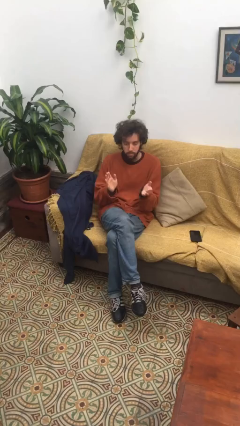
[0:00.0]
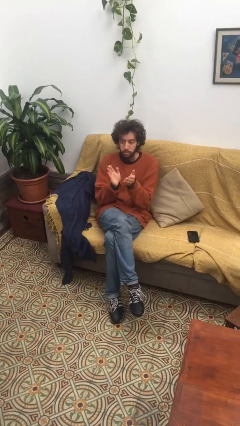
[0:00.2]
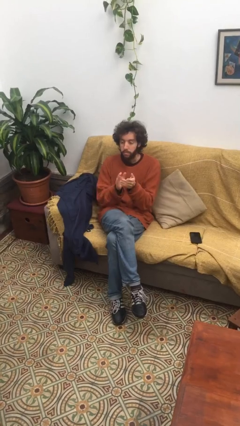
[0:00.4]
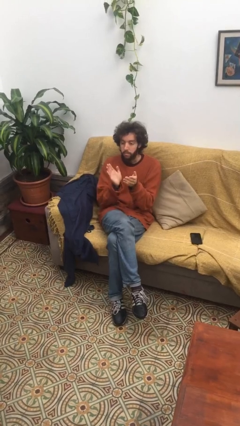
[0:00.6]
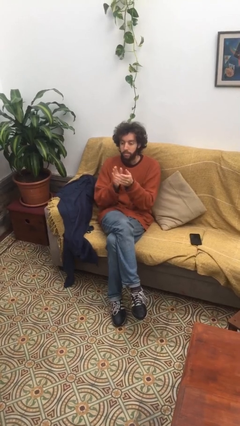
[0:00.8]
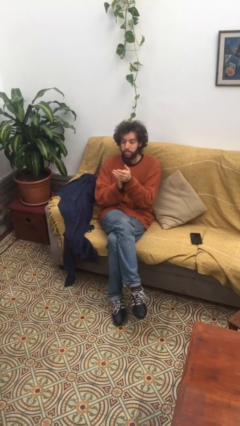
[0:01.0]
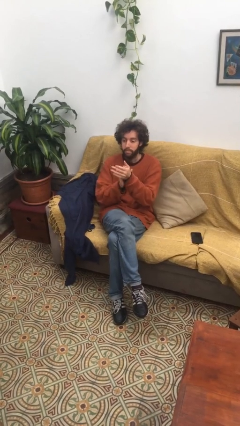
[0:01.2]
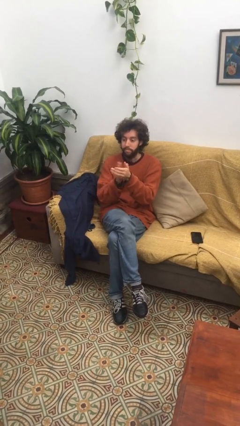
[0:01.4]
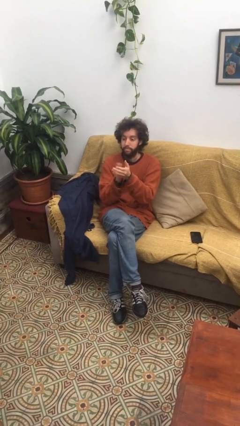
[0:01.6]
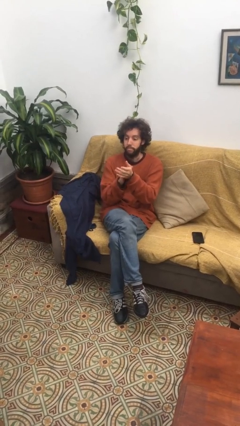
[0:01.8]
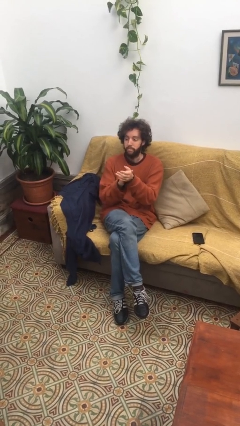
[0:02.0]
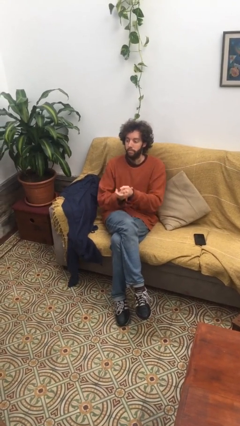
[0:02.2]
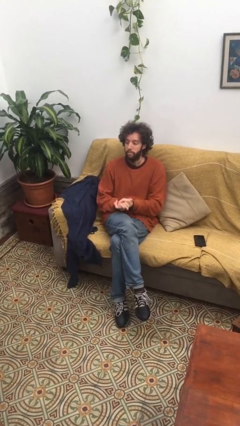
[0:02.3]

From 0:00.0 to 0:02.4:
person claps hands

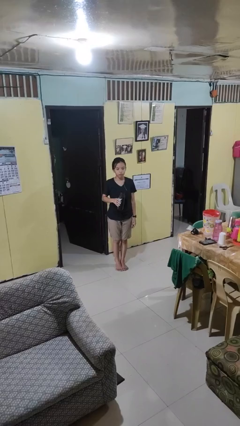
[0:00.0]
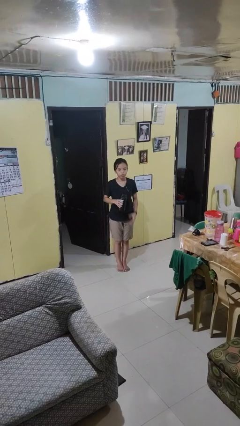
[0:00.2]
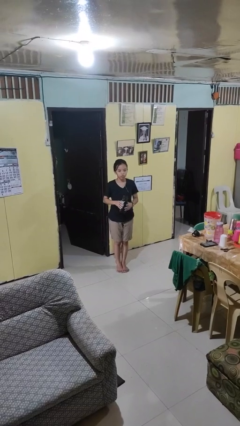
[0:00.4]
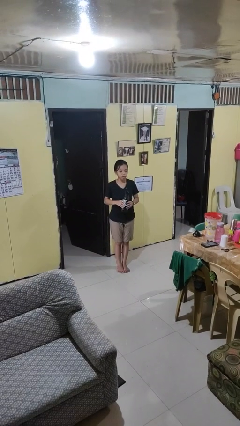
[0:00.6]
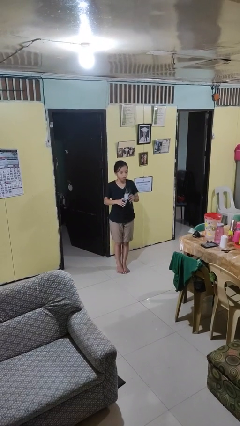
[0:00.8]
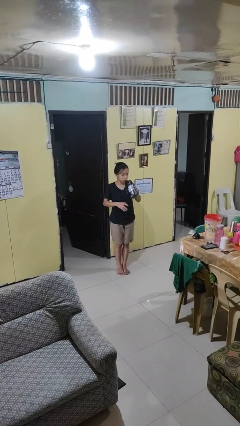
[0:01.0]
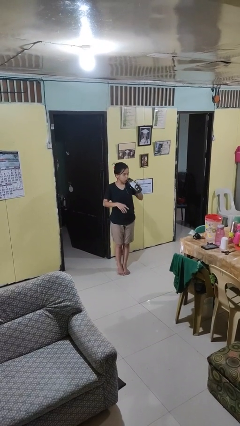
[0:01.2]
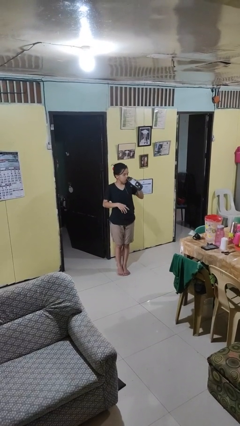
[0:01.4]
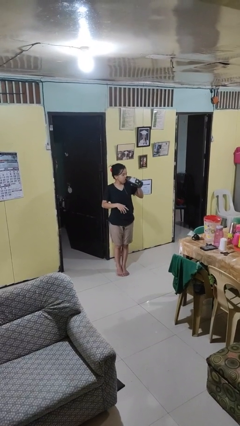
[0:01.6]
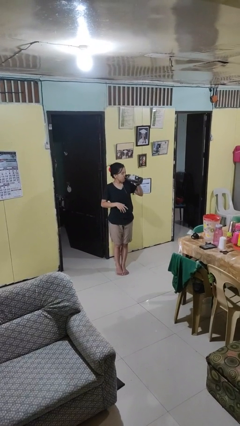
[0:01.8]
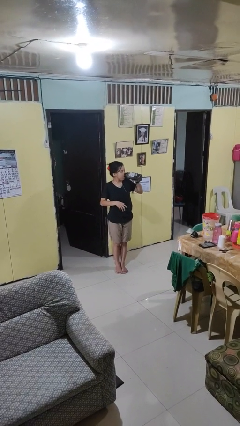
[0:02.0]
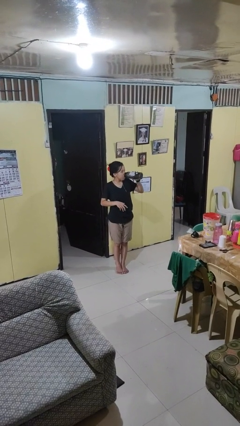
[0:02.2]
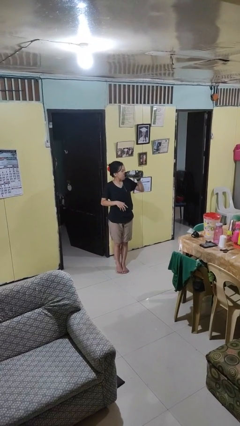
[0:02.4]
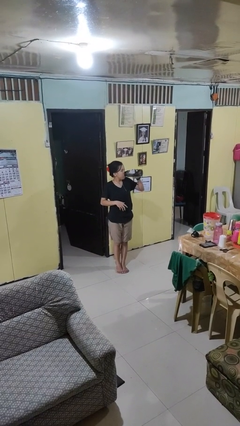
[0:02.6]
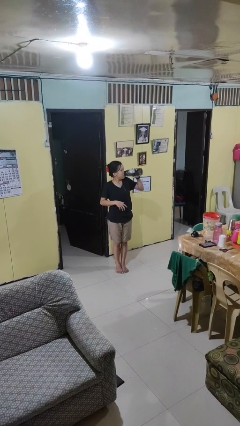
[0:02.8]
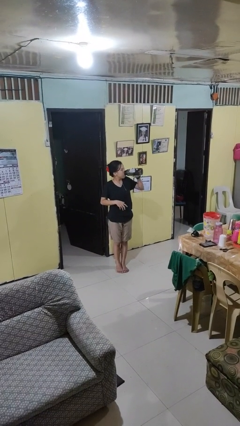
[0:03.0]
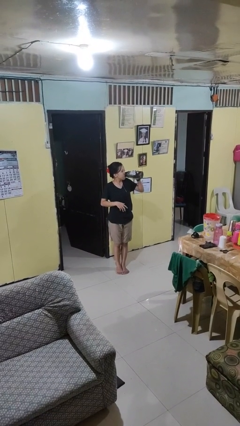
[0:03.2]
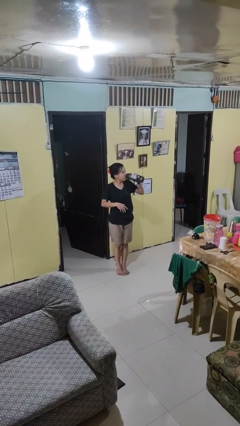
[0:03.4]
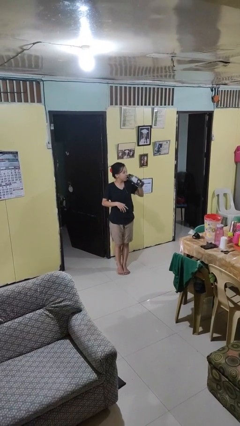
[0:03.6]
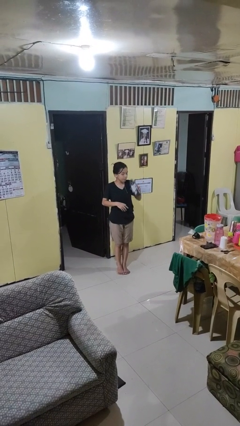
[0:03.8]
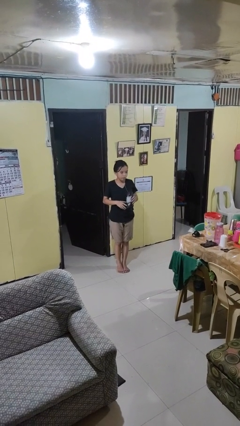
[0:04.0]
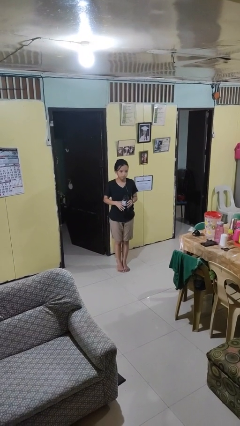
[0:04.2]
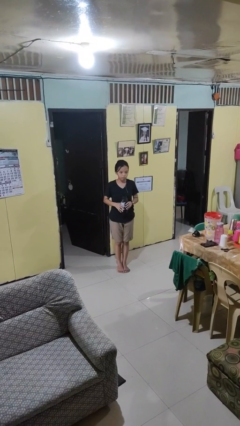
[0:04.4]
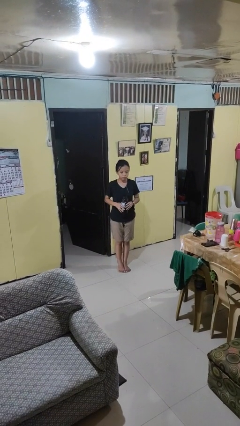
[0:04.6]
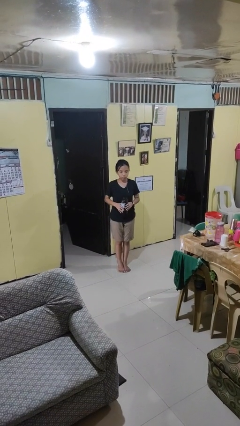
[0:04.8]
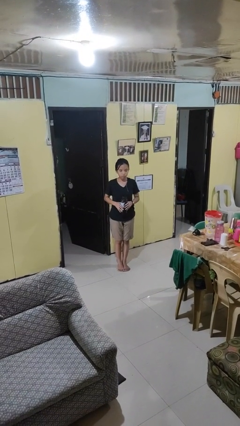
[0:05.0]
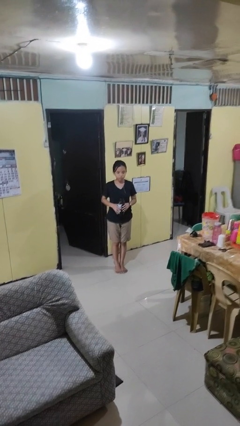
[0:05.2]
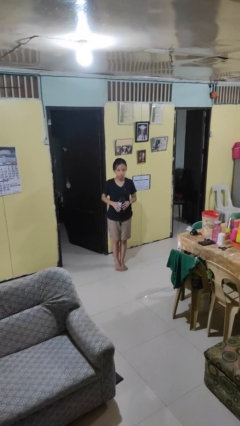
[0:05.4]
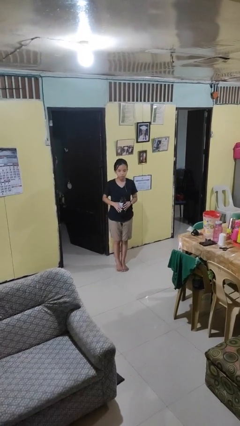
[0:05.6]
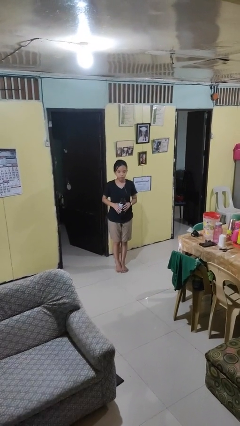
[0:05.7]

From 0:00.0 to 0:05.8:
person drinks from bottle

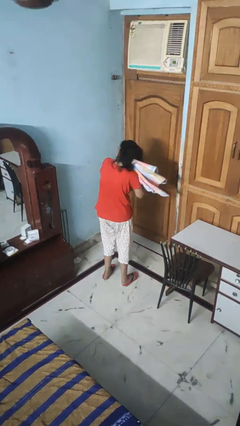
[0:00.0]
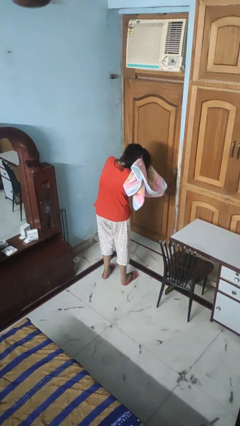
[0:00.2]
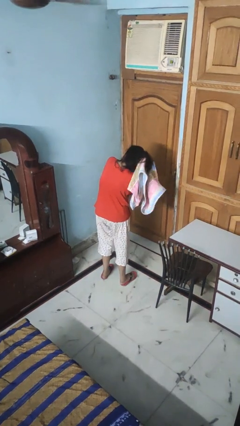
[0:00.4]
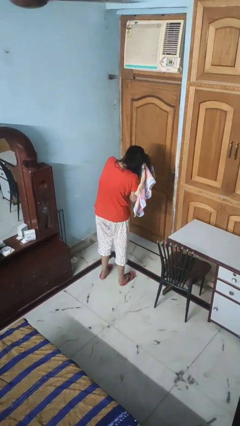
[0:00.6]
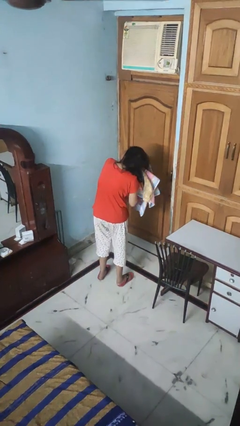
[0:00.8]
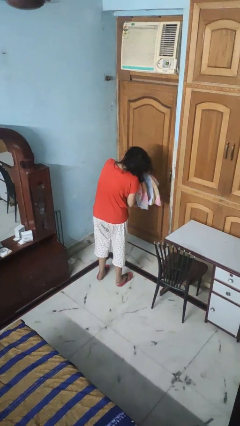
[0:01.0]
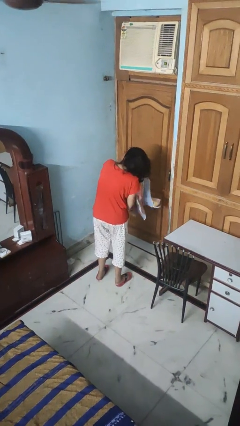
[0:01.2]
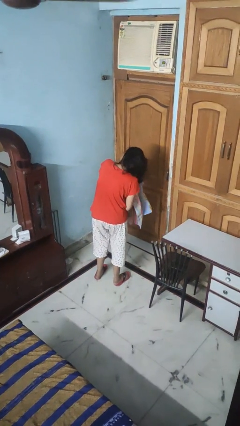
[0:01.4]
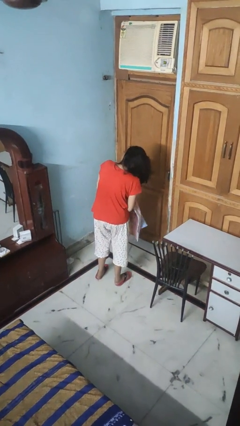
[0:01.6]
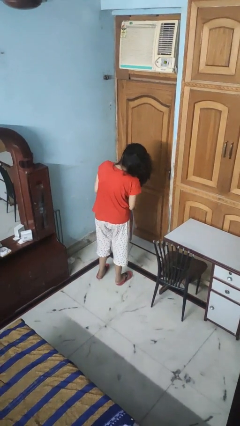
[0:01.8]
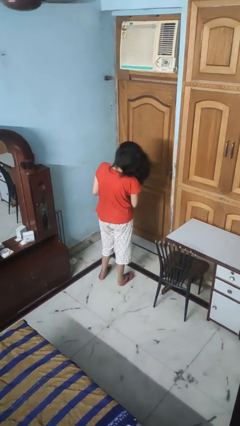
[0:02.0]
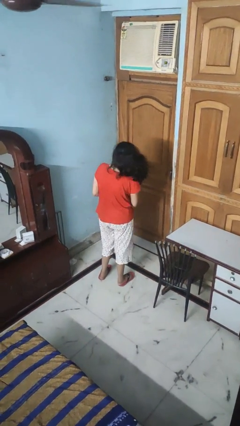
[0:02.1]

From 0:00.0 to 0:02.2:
person dries hair with towel

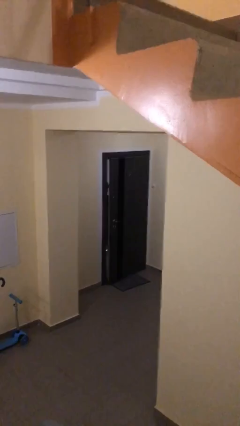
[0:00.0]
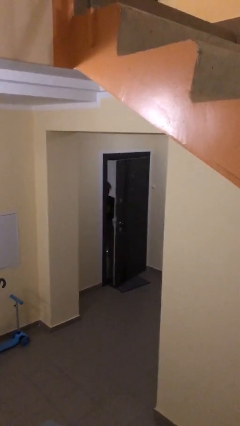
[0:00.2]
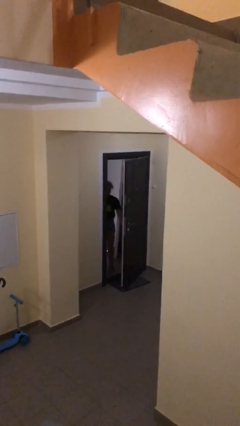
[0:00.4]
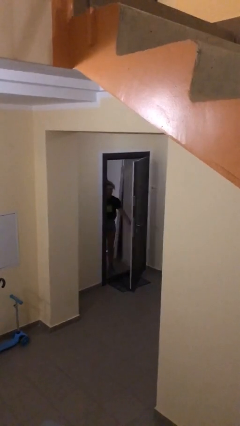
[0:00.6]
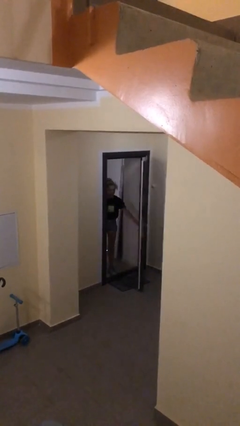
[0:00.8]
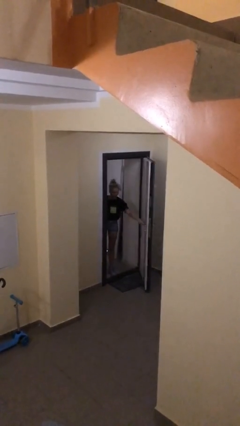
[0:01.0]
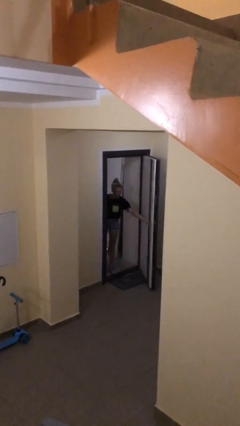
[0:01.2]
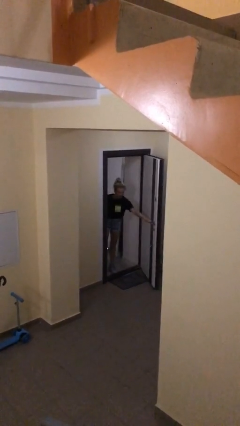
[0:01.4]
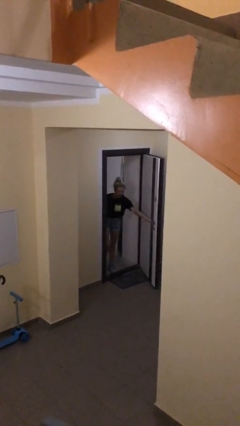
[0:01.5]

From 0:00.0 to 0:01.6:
person opens facility door

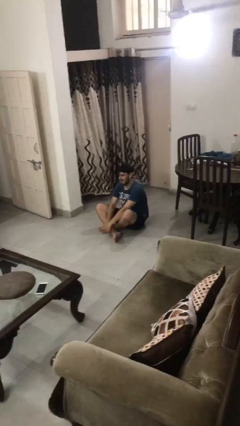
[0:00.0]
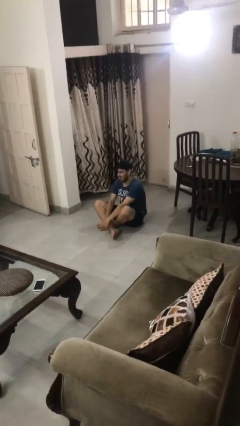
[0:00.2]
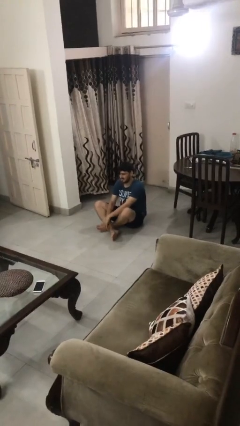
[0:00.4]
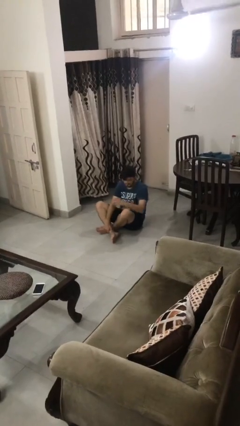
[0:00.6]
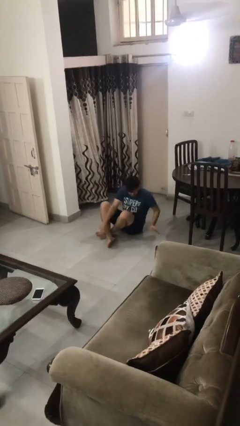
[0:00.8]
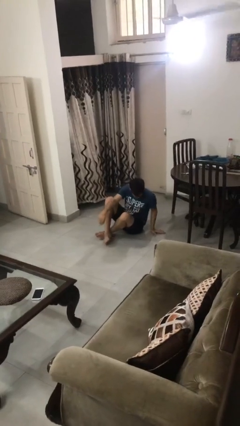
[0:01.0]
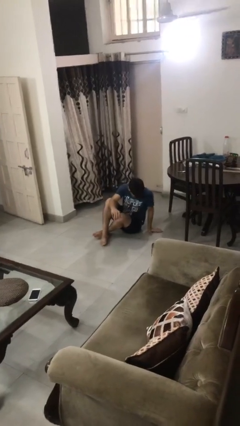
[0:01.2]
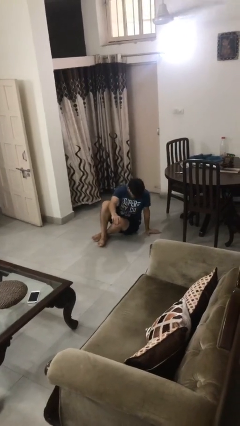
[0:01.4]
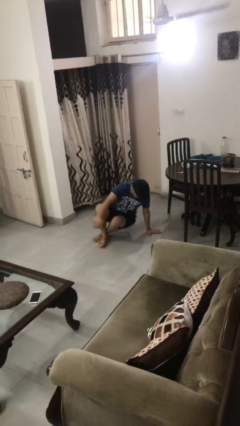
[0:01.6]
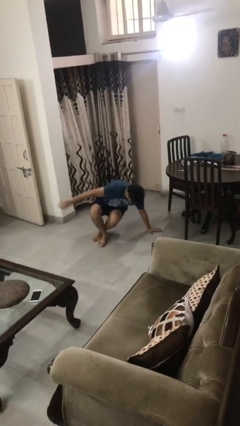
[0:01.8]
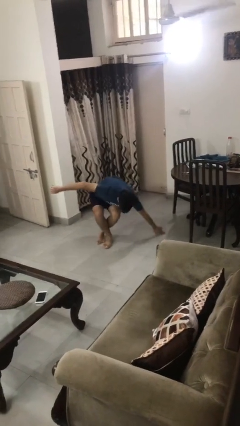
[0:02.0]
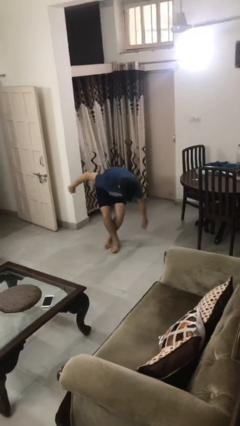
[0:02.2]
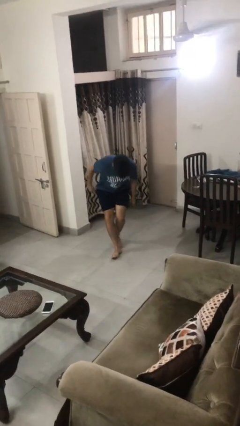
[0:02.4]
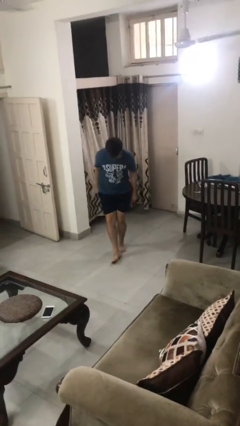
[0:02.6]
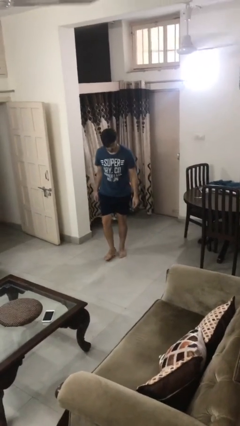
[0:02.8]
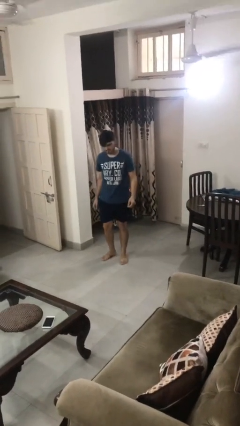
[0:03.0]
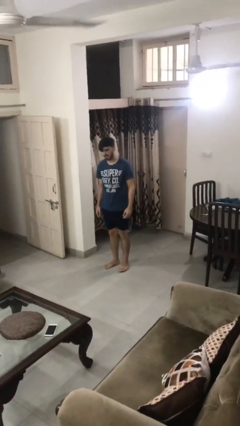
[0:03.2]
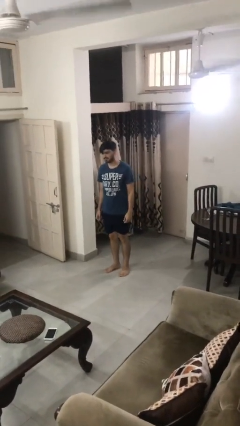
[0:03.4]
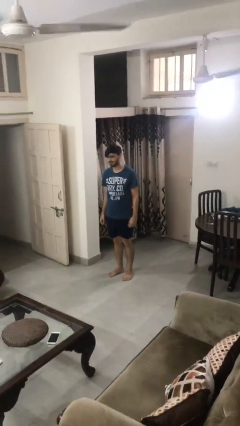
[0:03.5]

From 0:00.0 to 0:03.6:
person stands up from floor

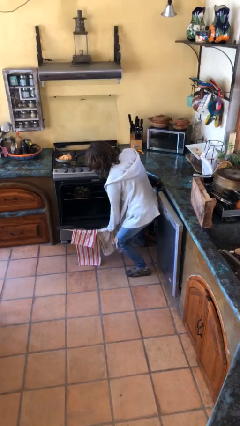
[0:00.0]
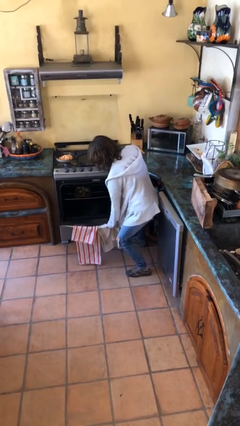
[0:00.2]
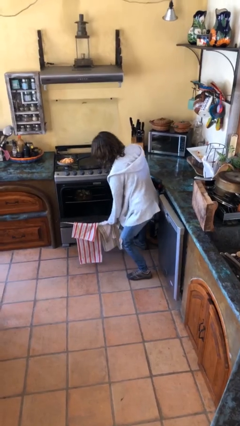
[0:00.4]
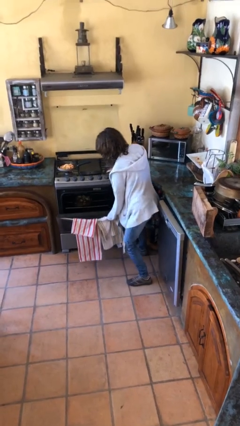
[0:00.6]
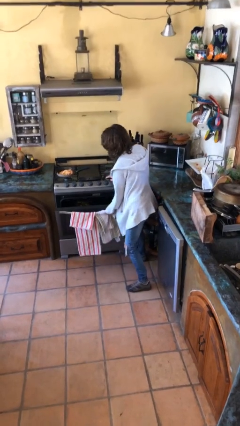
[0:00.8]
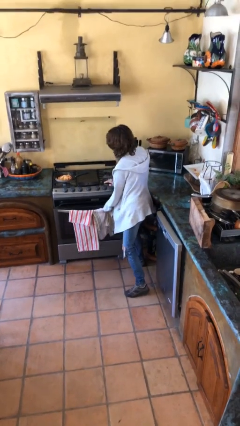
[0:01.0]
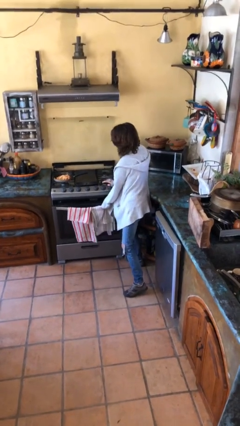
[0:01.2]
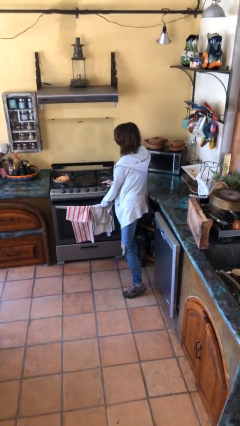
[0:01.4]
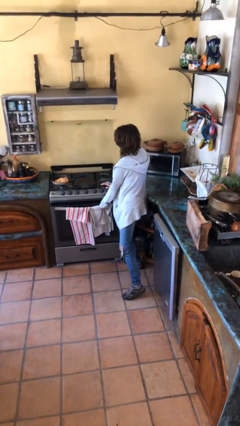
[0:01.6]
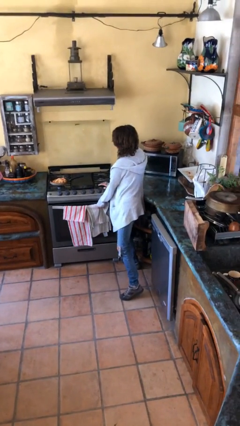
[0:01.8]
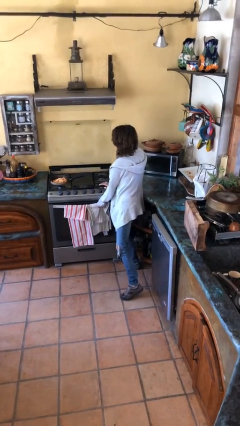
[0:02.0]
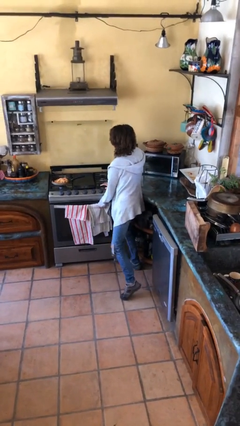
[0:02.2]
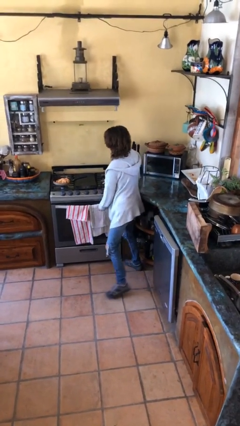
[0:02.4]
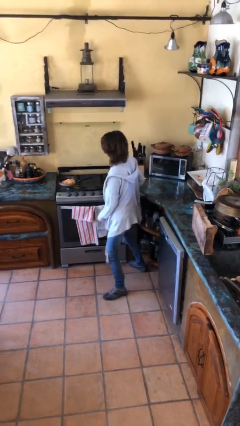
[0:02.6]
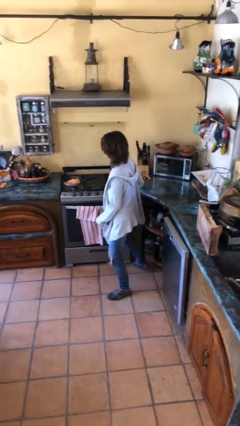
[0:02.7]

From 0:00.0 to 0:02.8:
person closes oven door
